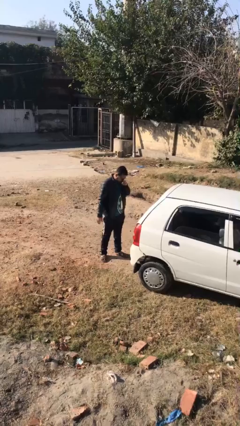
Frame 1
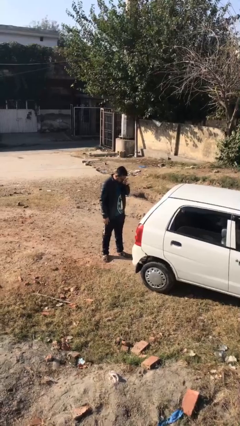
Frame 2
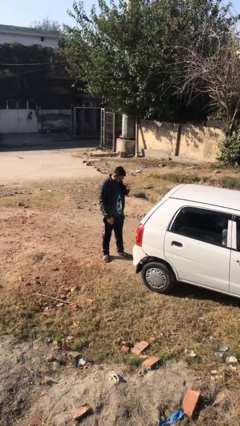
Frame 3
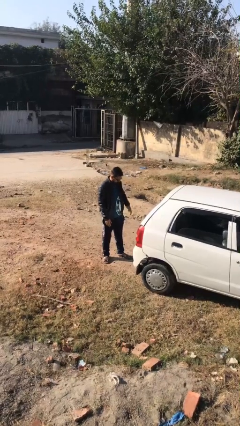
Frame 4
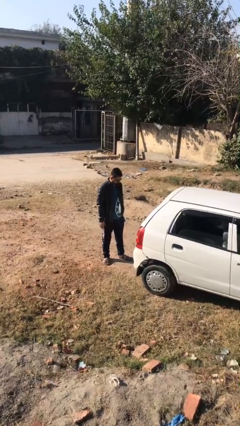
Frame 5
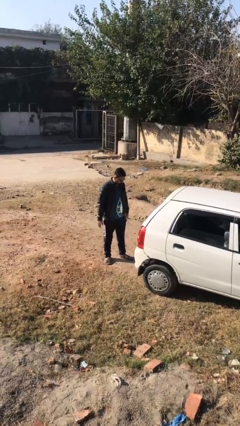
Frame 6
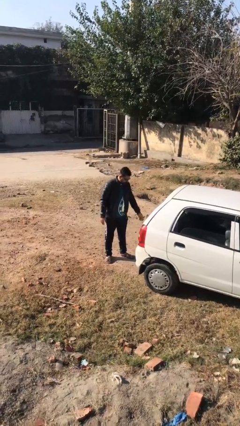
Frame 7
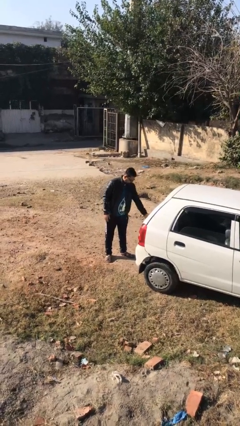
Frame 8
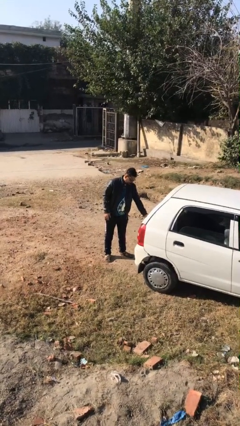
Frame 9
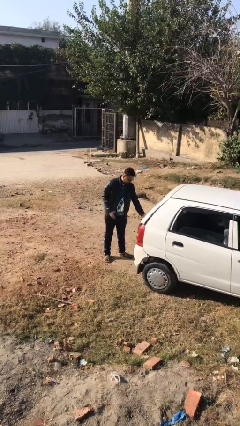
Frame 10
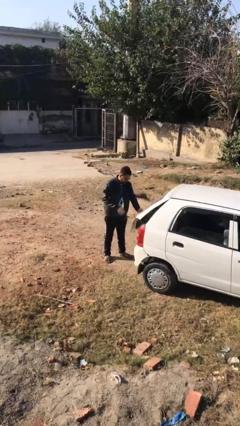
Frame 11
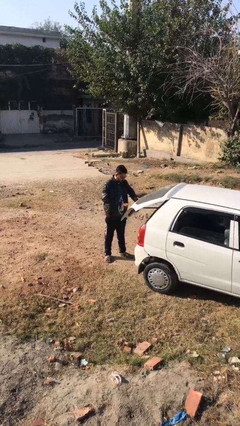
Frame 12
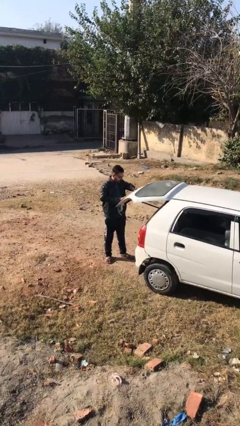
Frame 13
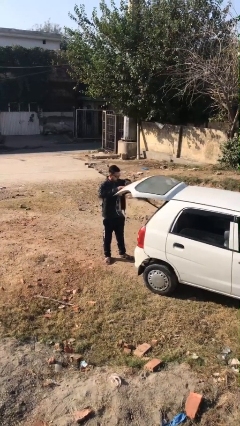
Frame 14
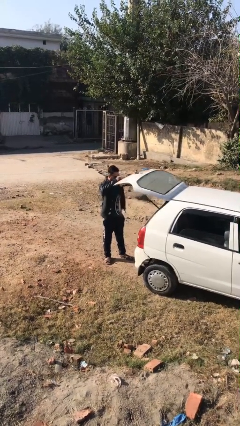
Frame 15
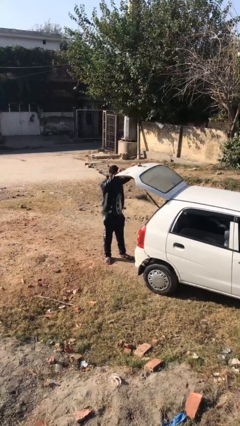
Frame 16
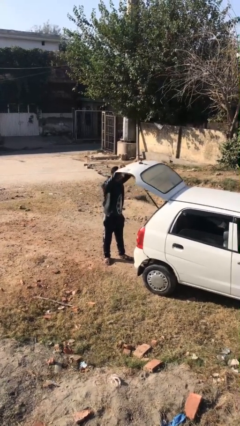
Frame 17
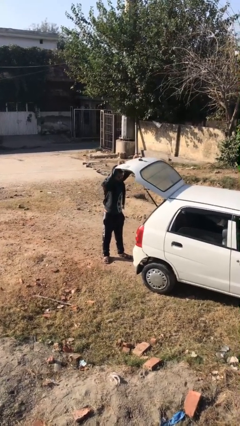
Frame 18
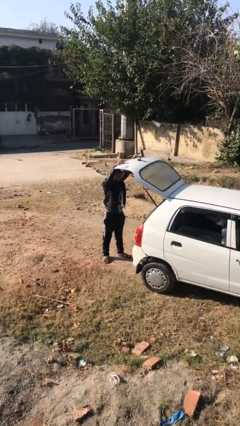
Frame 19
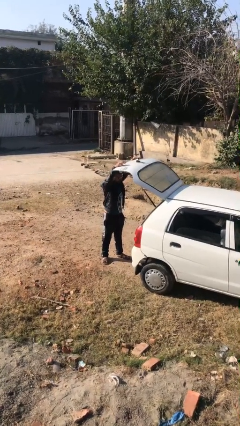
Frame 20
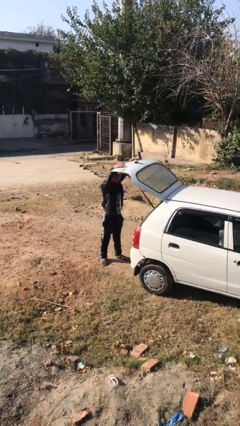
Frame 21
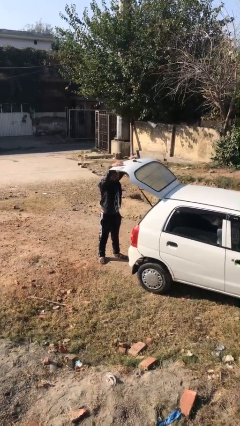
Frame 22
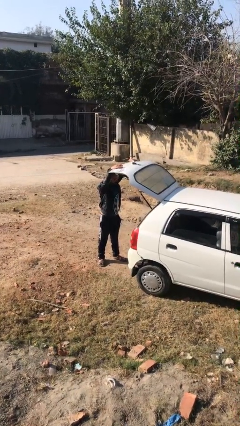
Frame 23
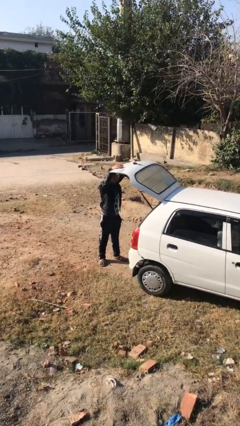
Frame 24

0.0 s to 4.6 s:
person opens car trunk

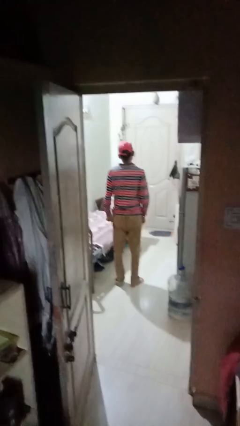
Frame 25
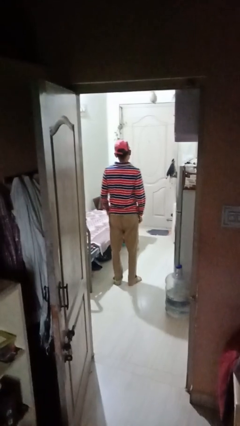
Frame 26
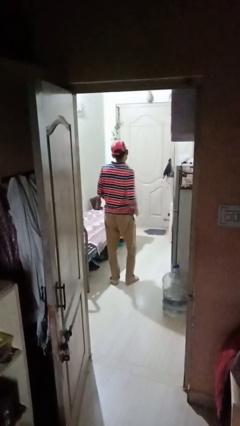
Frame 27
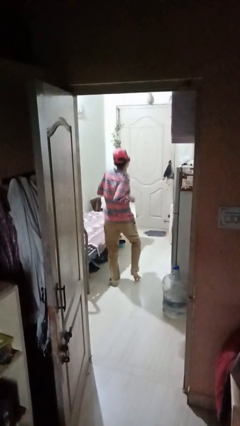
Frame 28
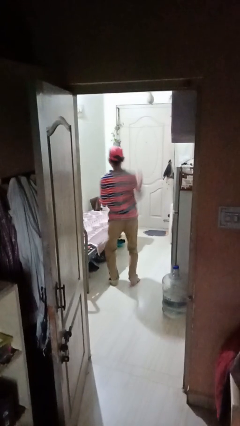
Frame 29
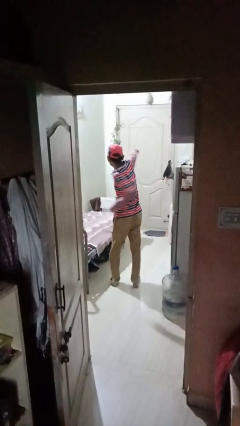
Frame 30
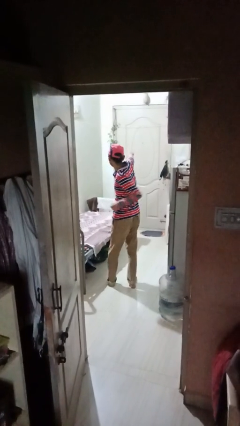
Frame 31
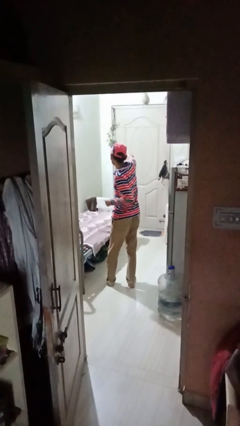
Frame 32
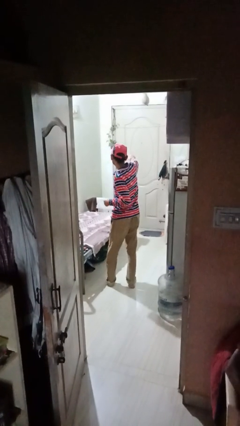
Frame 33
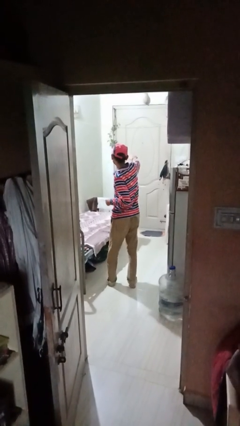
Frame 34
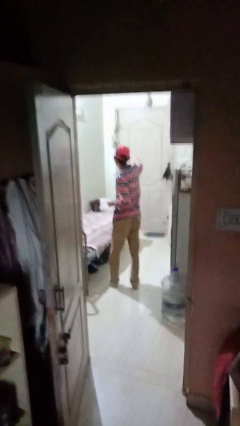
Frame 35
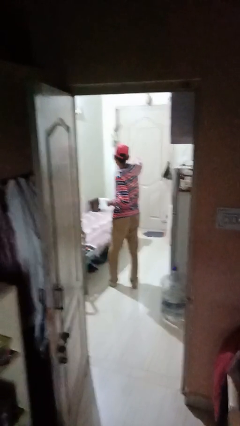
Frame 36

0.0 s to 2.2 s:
person punches

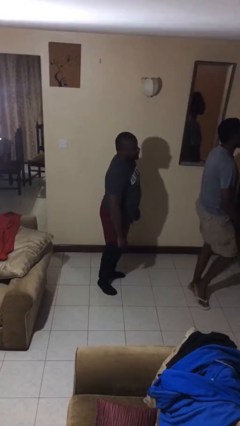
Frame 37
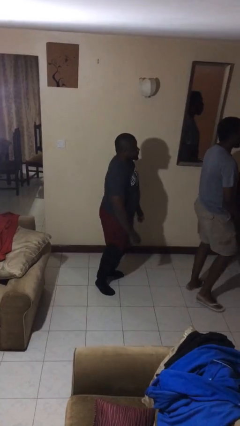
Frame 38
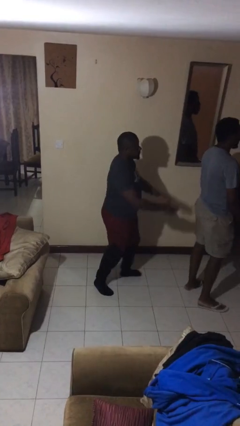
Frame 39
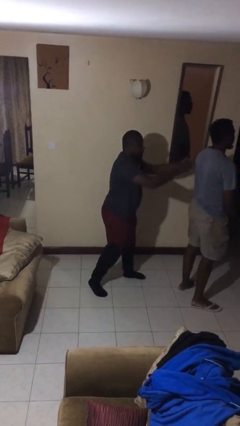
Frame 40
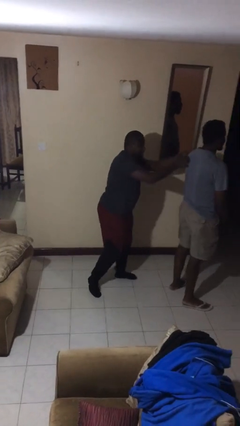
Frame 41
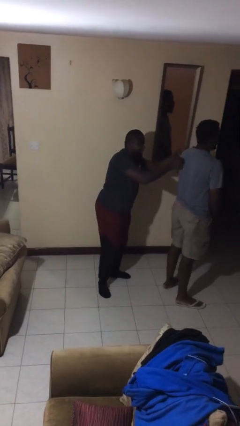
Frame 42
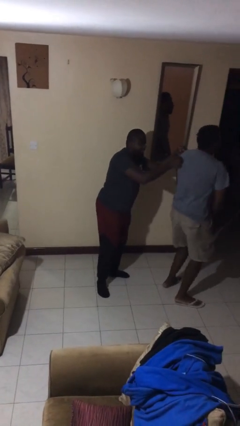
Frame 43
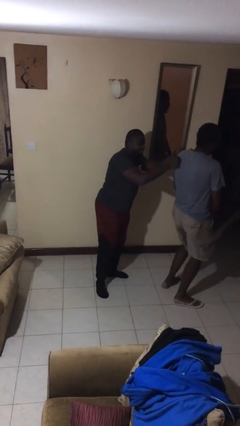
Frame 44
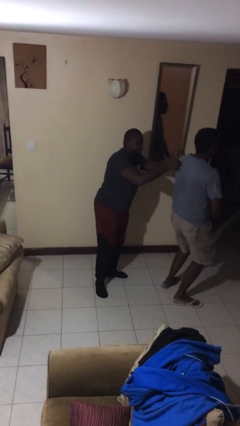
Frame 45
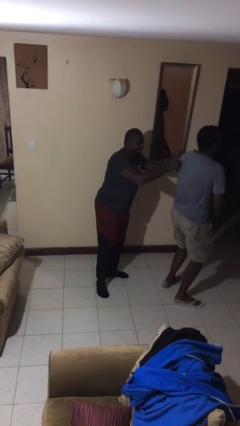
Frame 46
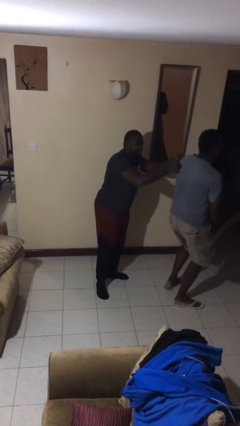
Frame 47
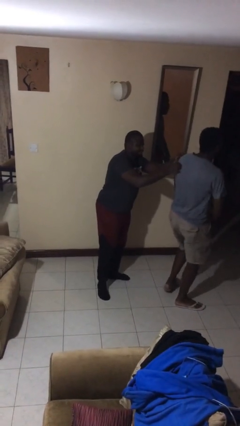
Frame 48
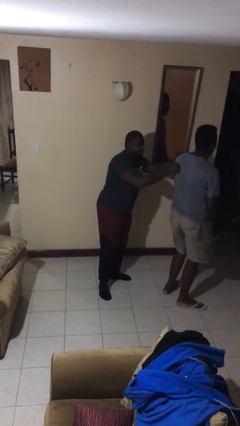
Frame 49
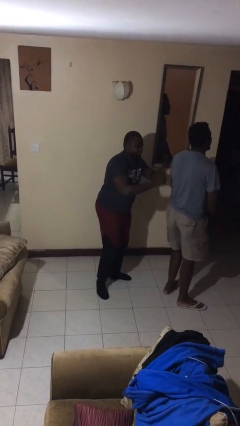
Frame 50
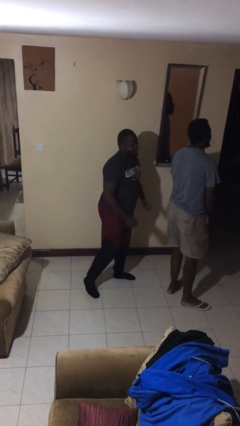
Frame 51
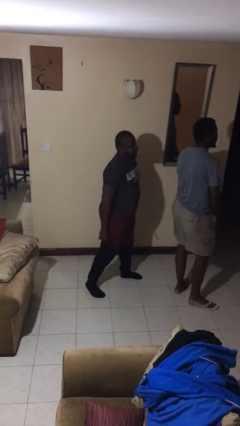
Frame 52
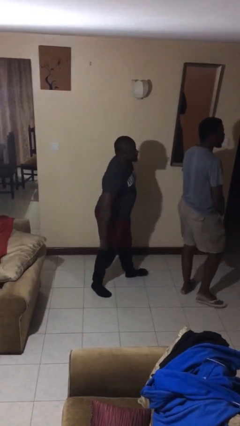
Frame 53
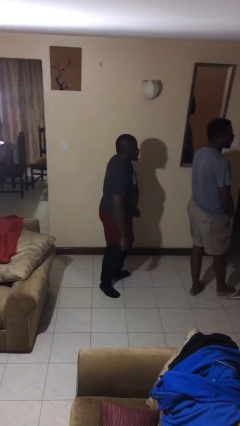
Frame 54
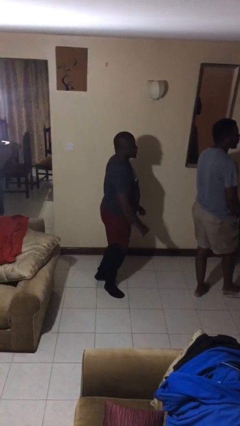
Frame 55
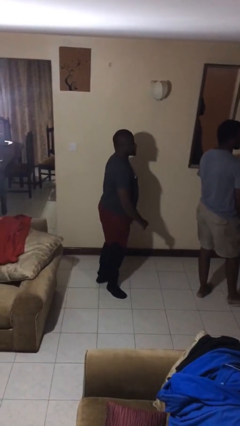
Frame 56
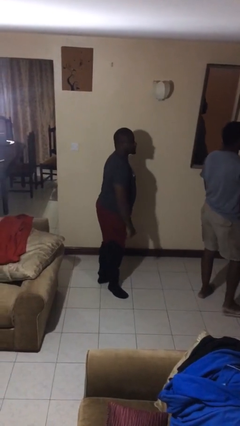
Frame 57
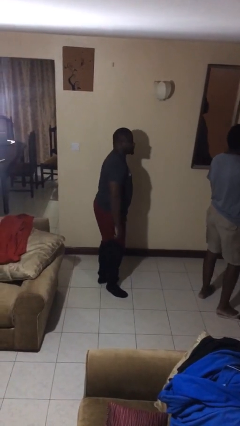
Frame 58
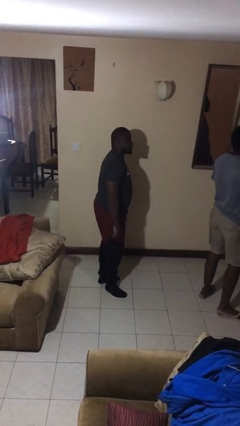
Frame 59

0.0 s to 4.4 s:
person tickles person

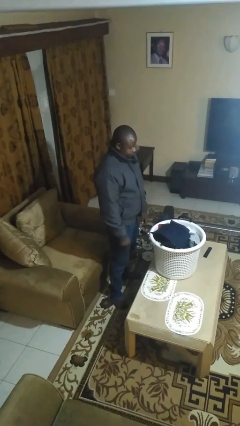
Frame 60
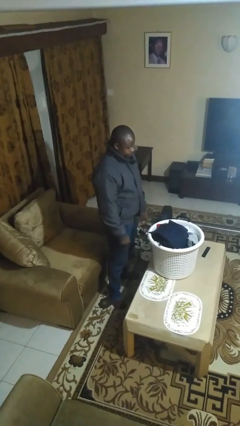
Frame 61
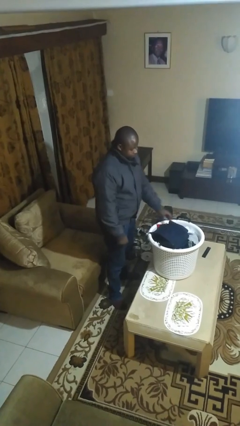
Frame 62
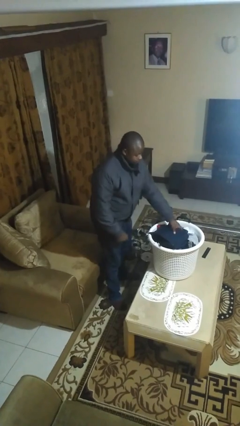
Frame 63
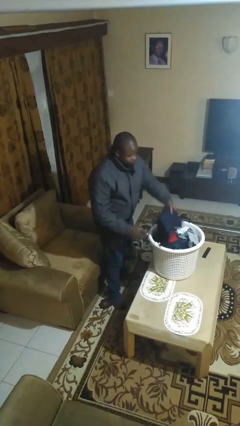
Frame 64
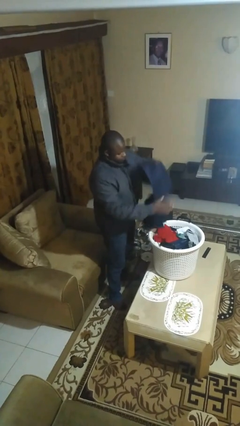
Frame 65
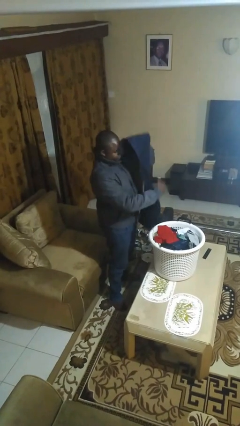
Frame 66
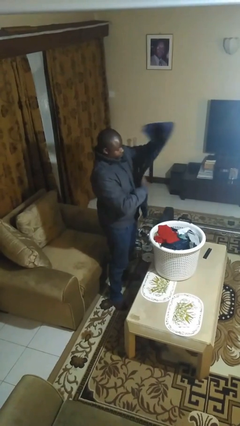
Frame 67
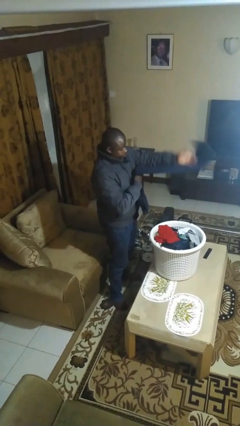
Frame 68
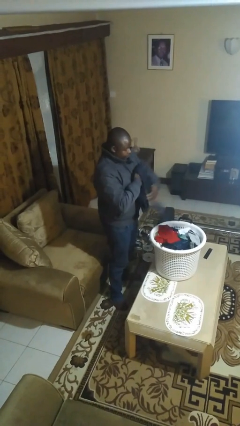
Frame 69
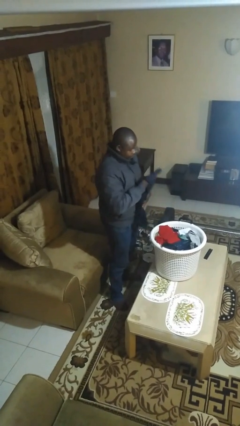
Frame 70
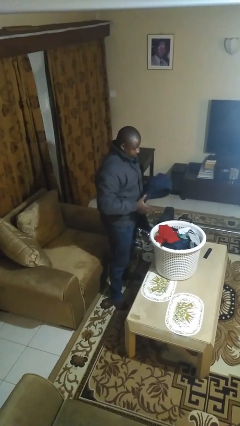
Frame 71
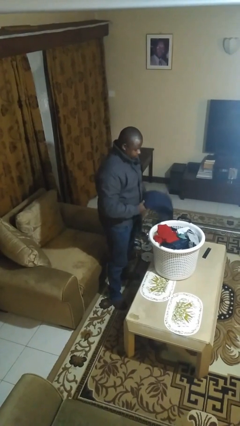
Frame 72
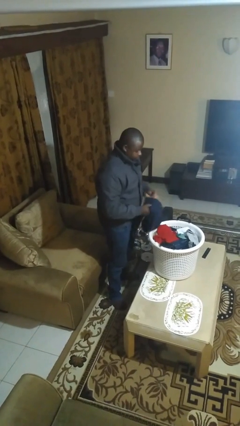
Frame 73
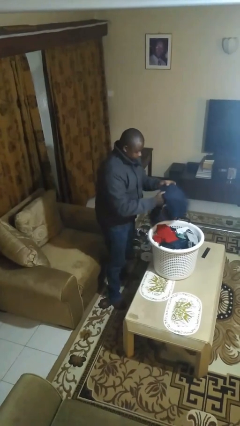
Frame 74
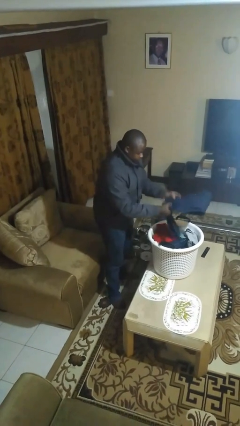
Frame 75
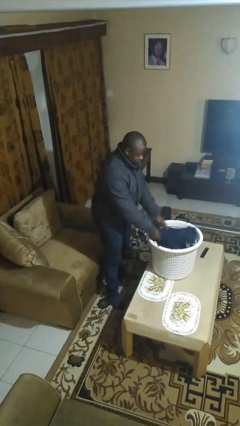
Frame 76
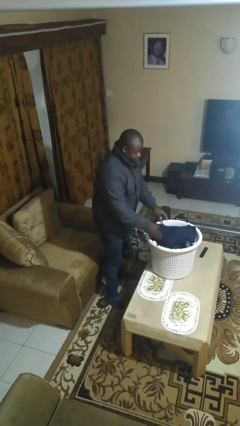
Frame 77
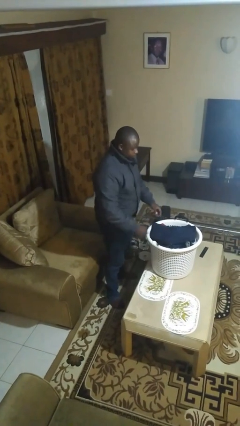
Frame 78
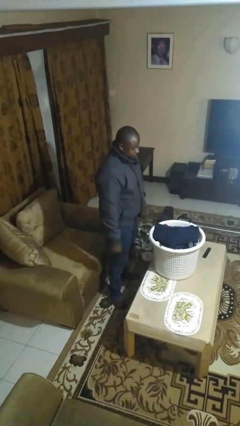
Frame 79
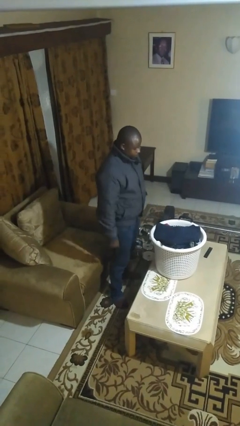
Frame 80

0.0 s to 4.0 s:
person folds pants

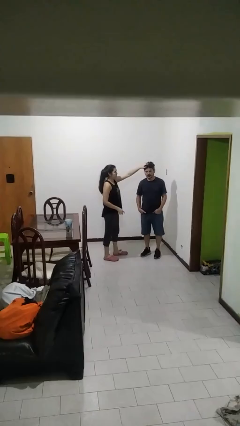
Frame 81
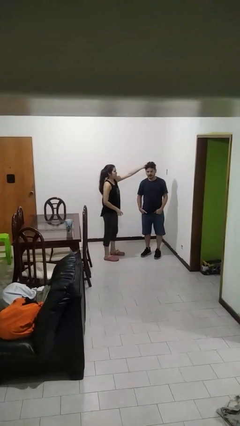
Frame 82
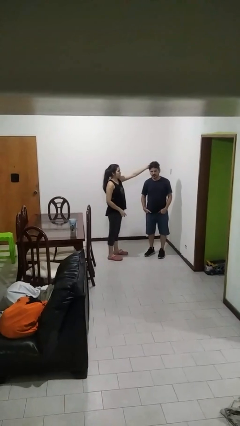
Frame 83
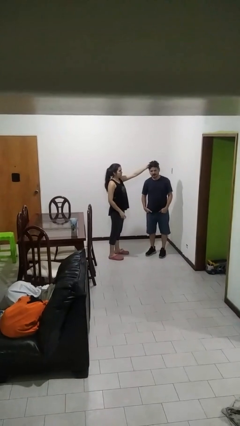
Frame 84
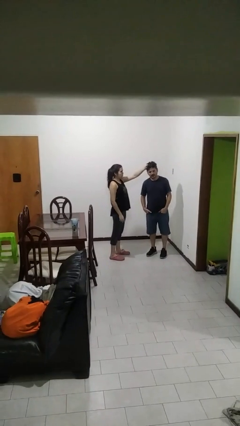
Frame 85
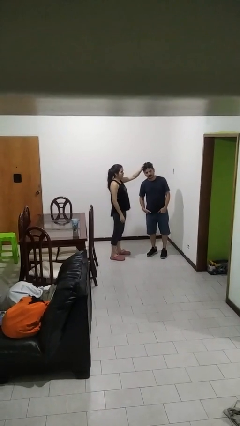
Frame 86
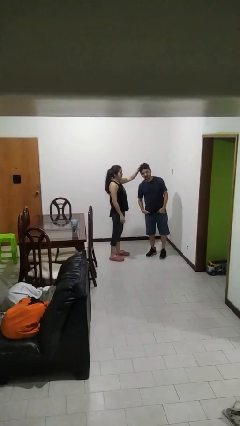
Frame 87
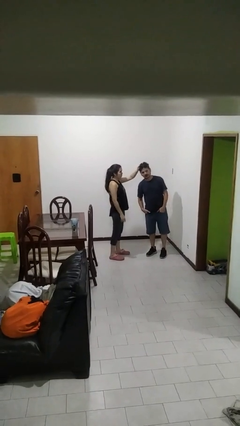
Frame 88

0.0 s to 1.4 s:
person grabs person by hair

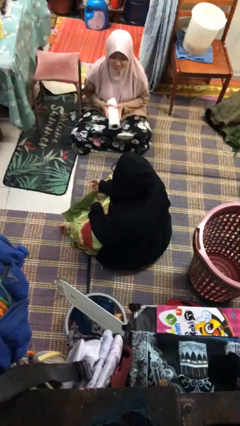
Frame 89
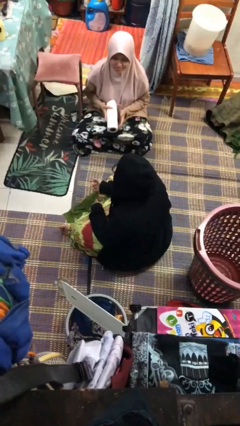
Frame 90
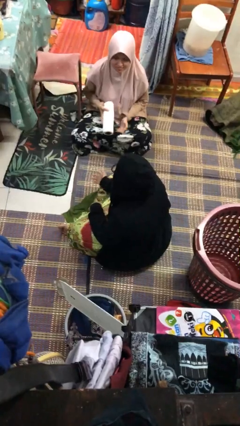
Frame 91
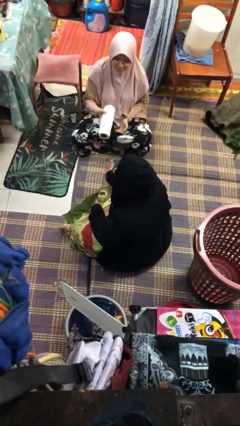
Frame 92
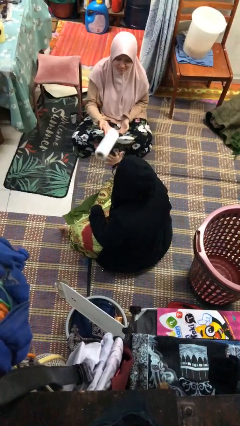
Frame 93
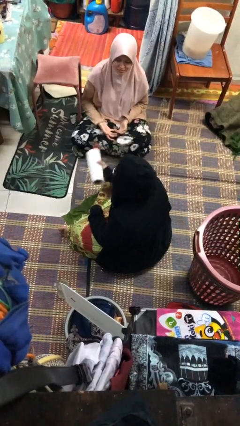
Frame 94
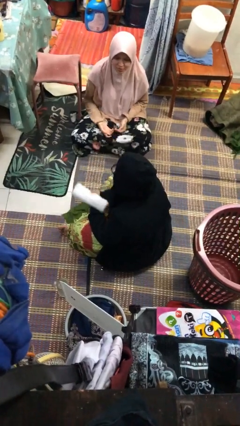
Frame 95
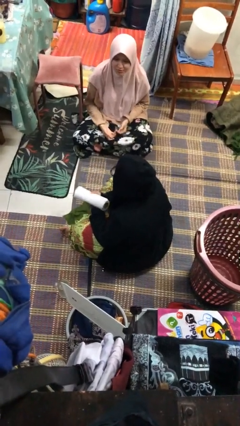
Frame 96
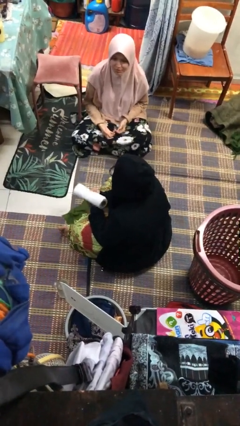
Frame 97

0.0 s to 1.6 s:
person catches object from person
